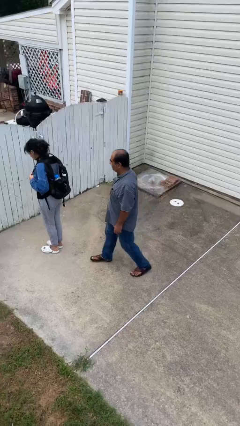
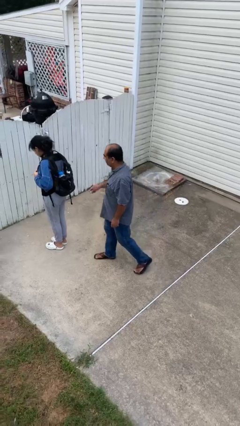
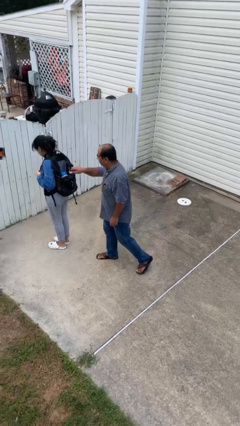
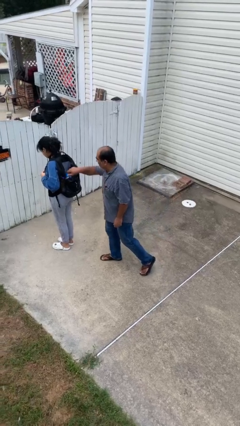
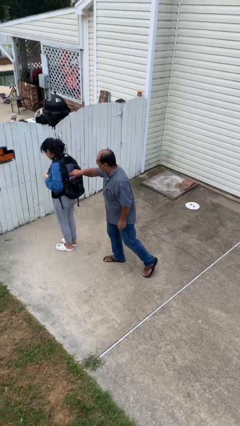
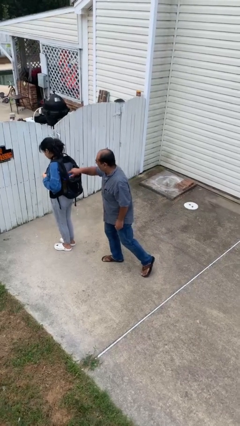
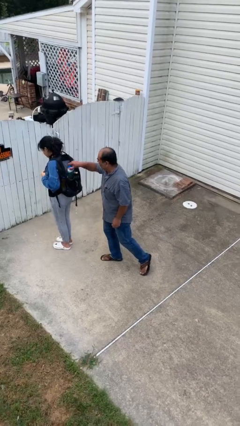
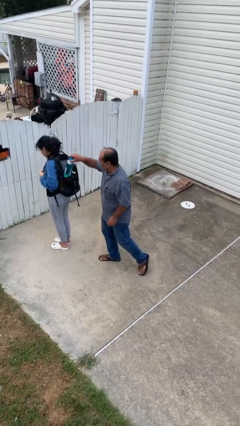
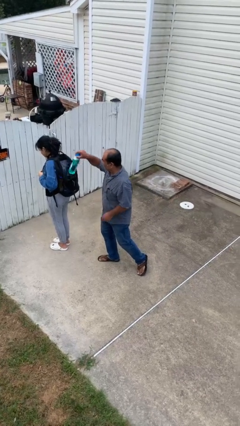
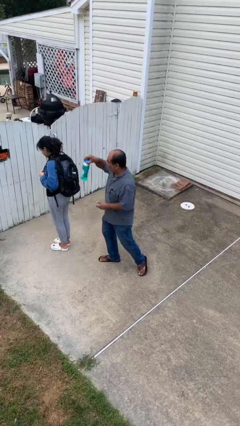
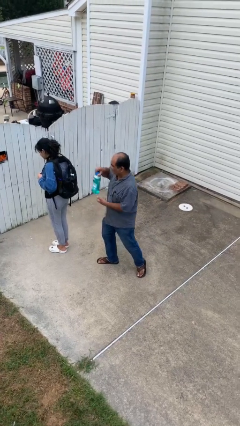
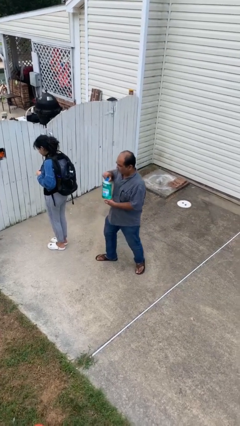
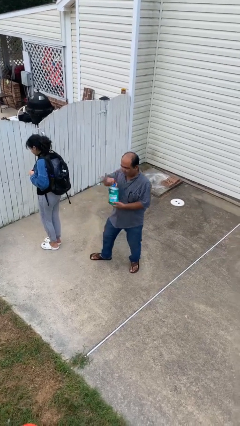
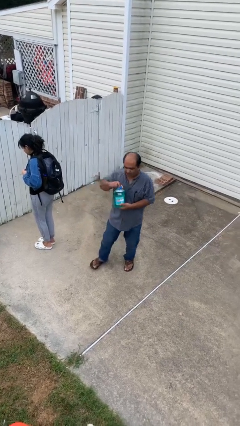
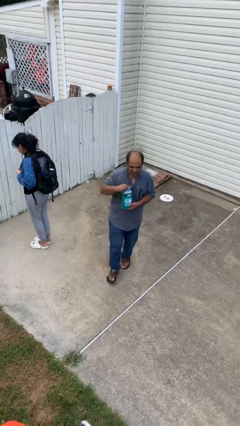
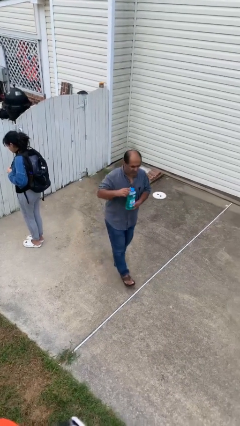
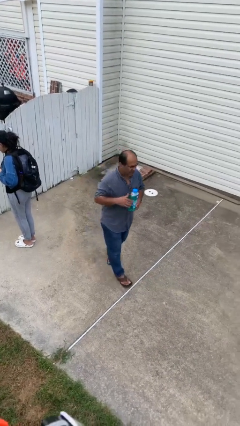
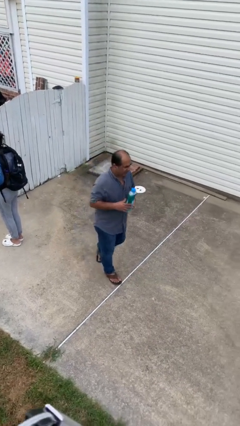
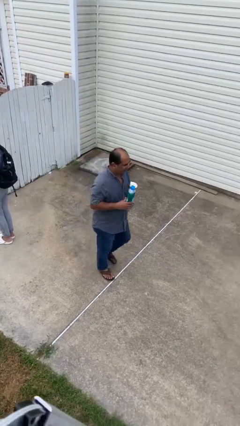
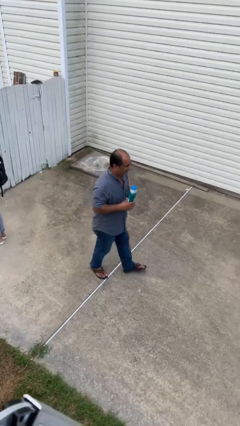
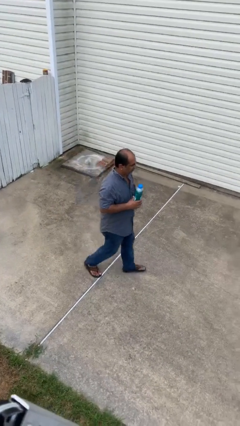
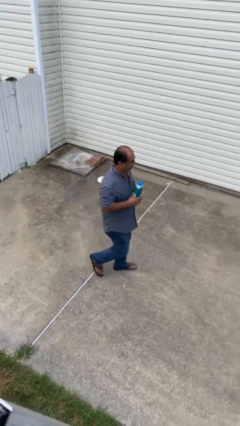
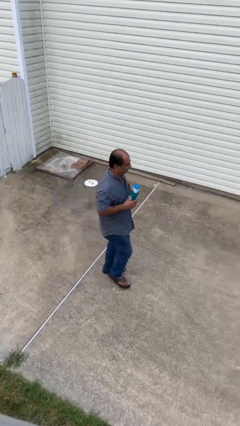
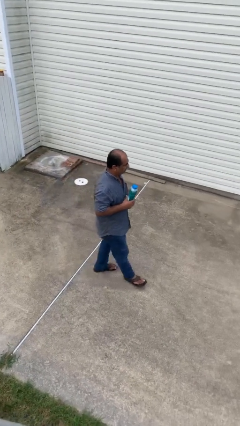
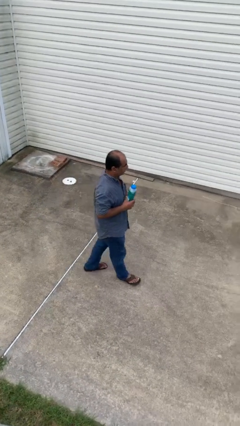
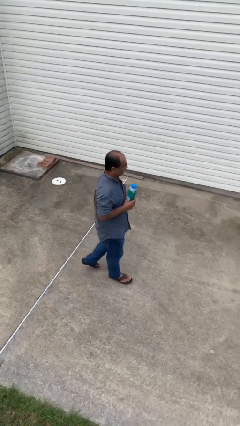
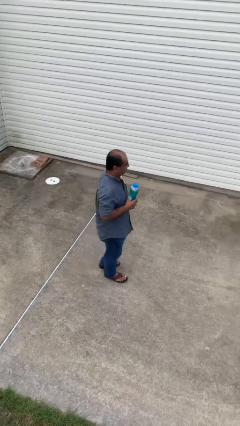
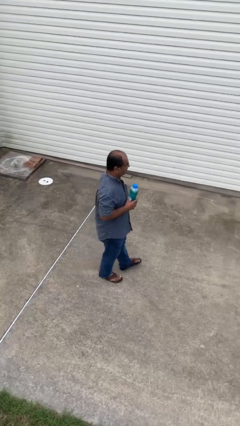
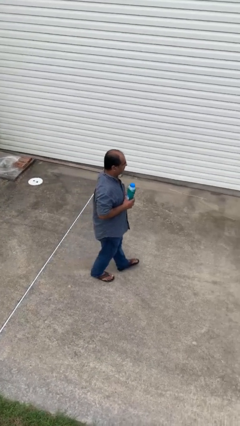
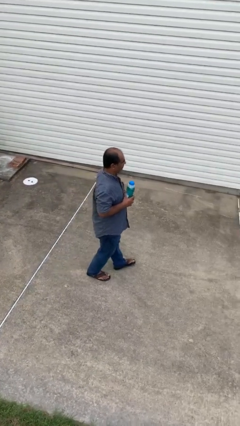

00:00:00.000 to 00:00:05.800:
person steals object from person

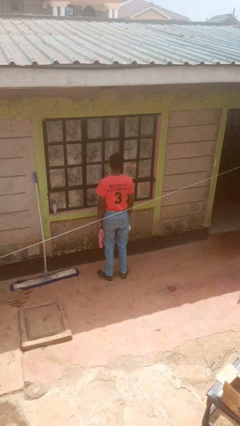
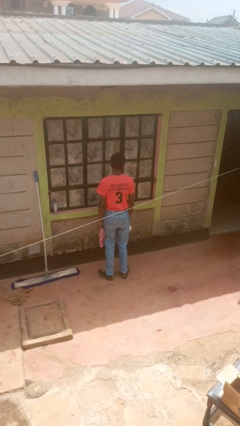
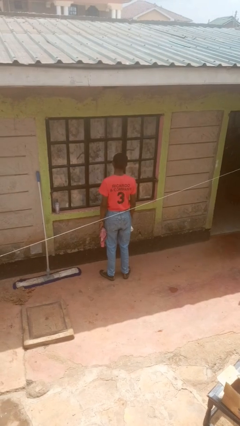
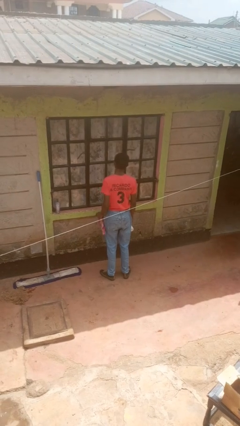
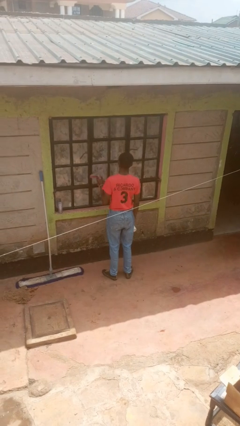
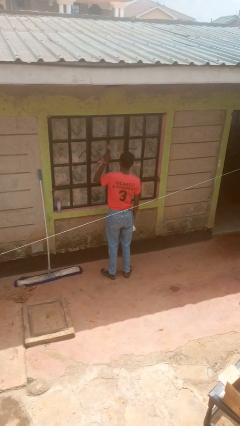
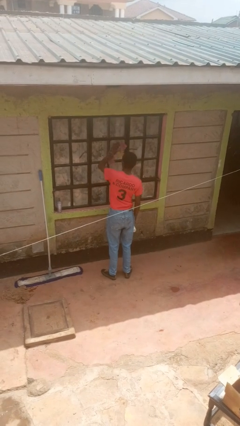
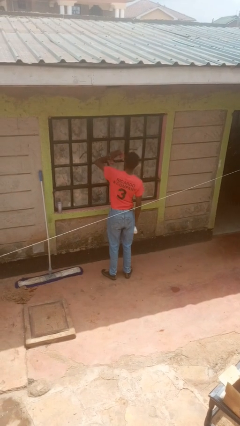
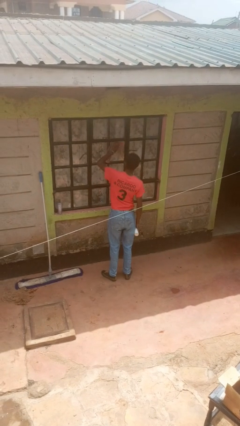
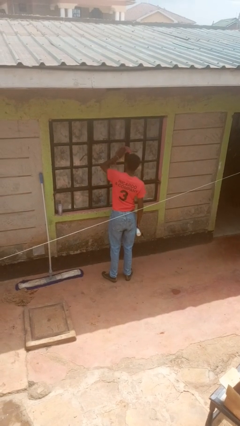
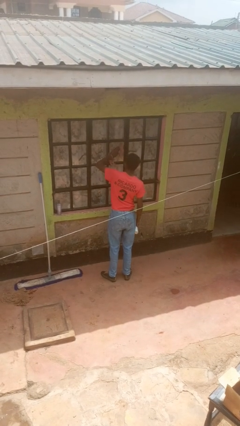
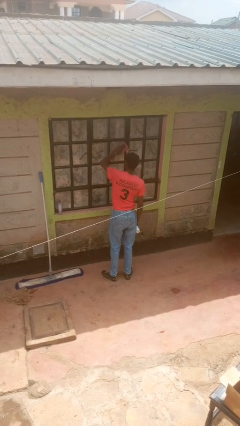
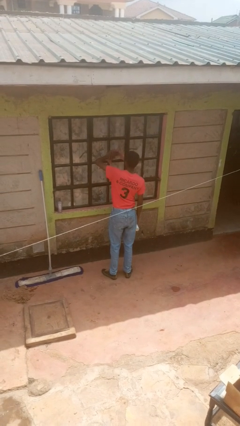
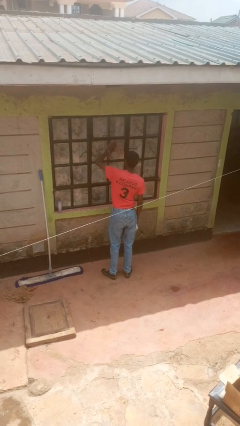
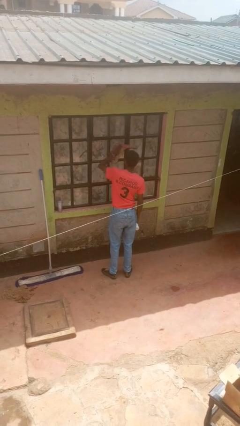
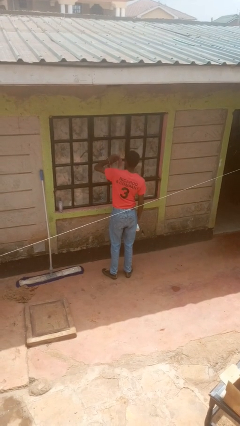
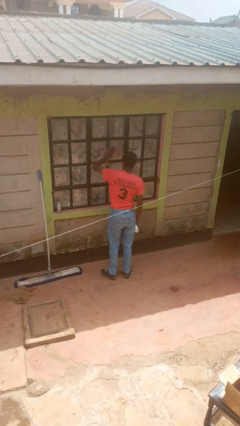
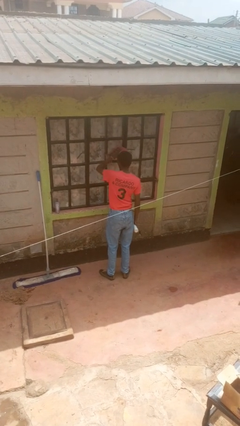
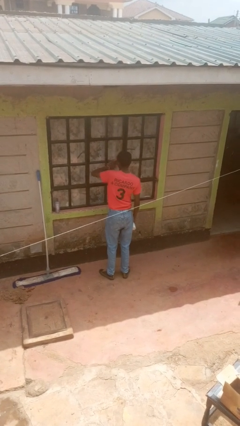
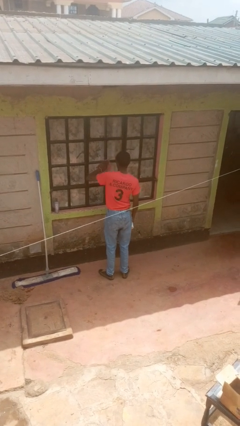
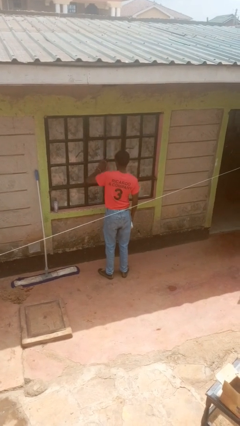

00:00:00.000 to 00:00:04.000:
person washes window

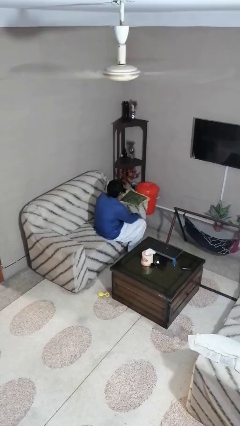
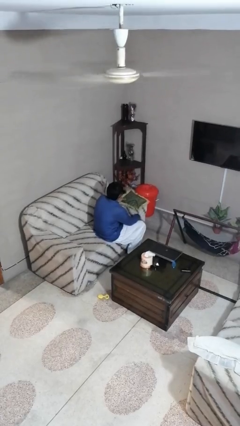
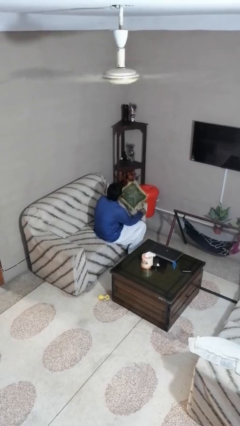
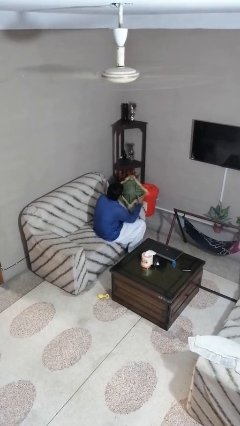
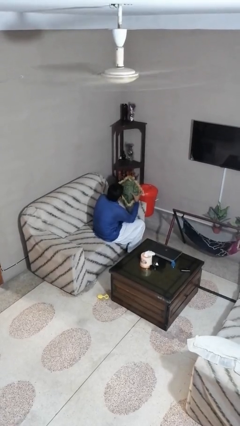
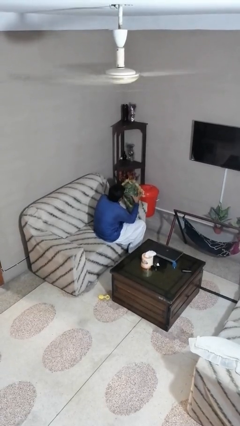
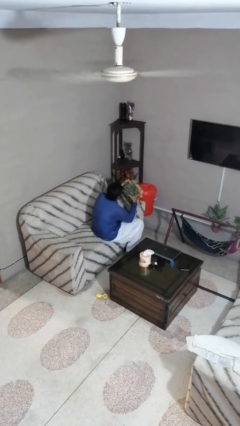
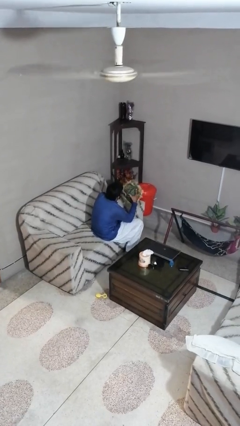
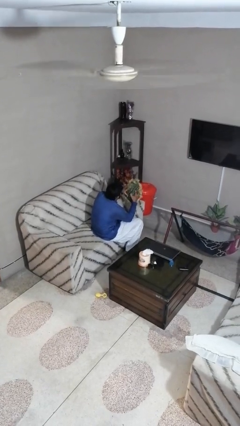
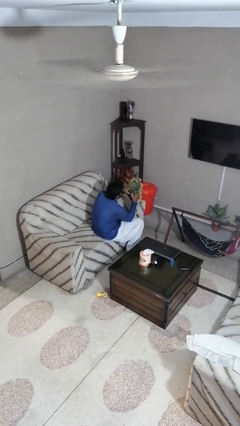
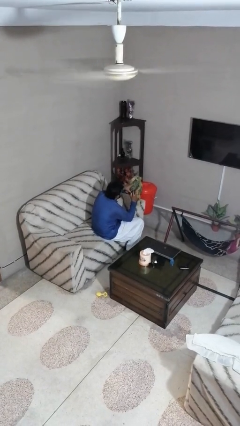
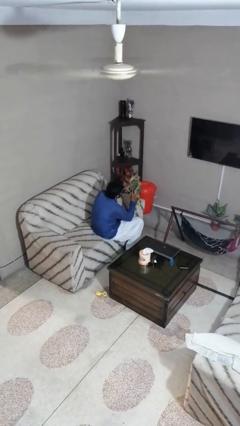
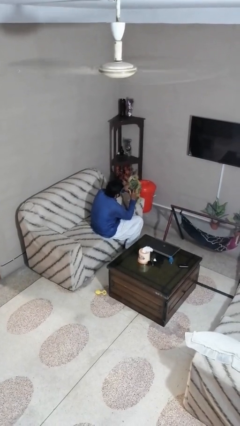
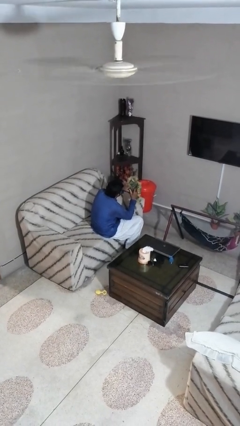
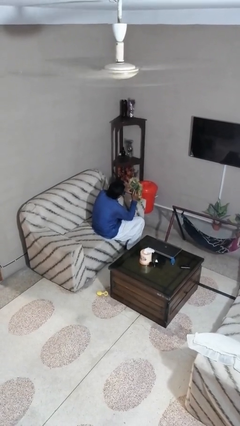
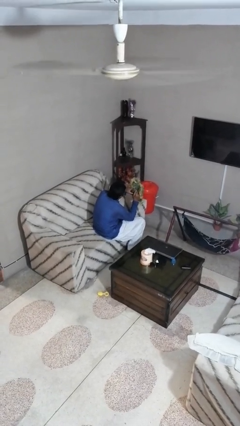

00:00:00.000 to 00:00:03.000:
person squeezes object

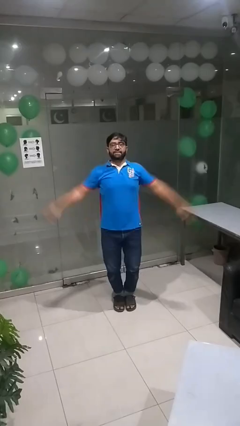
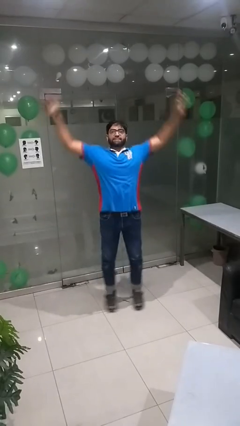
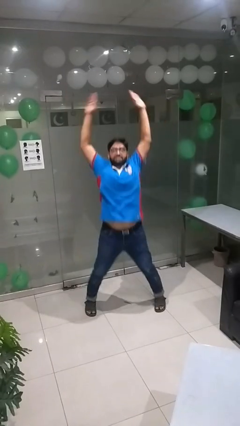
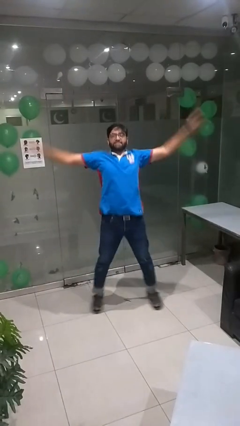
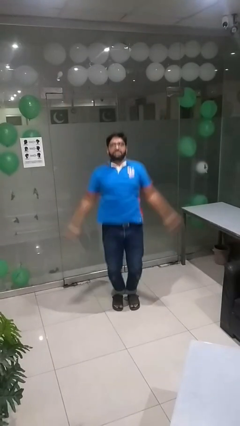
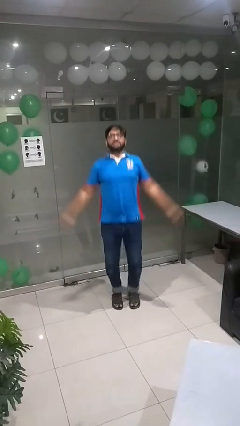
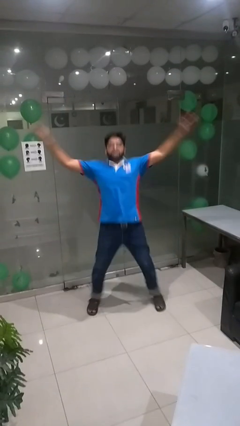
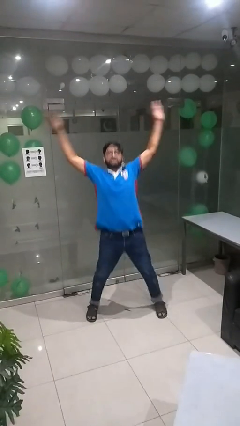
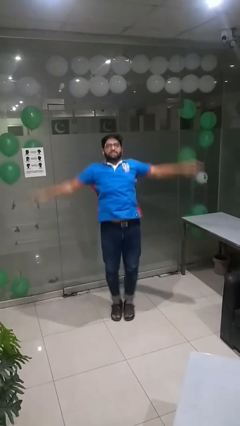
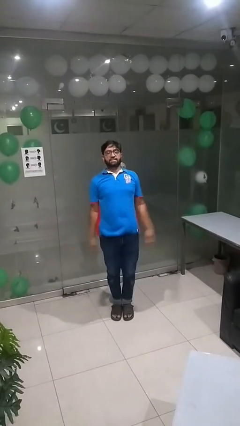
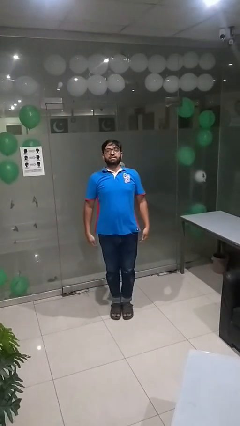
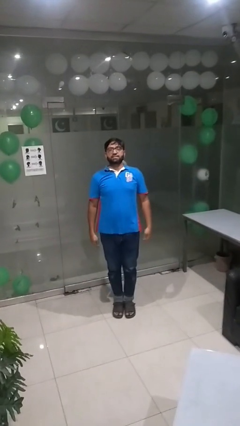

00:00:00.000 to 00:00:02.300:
person exercises with jumping jacks

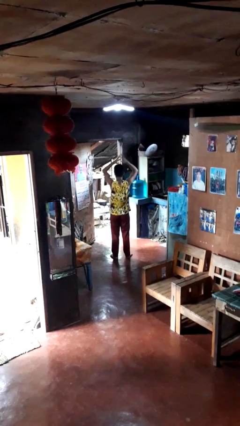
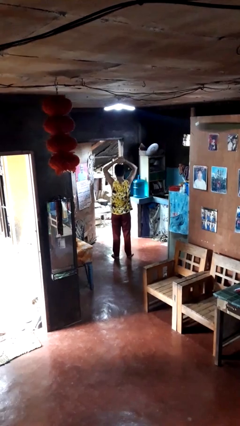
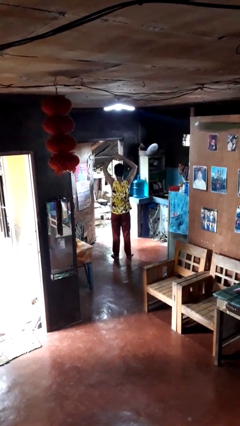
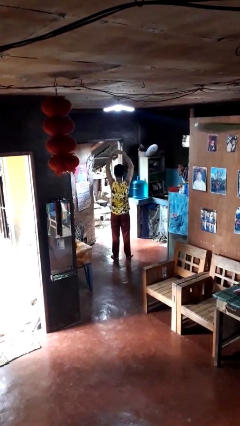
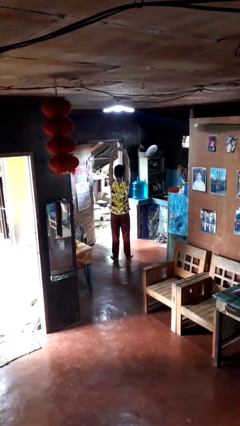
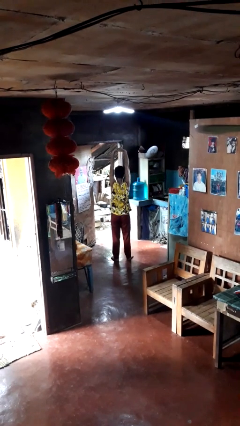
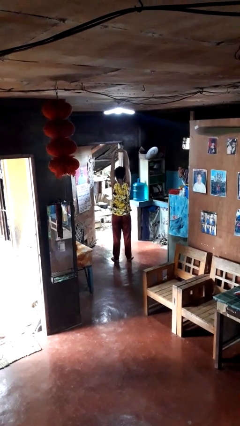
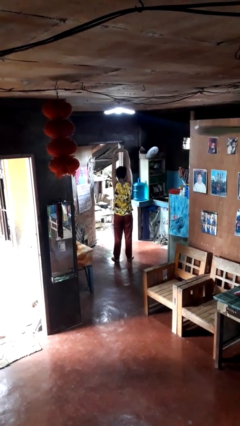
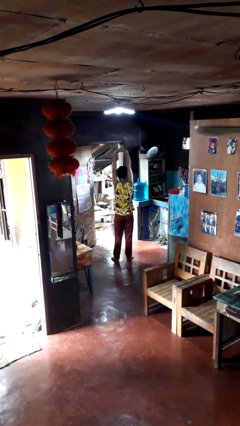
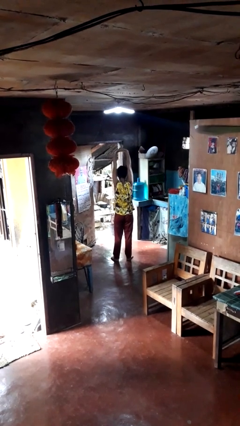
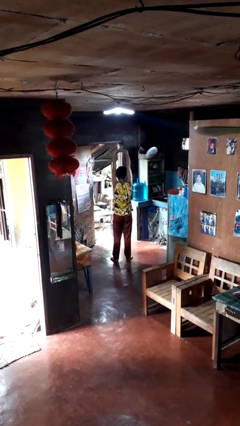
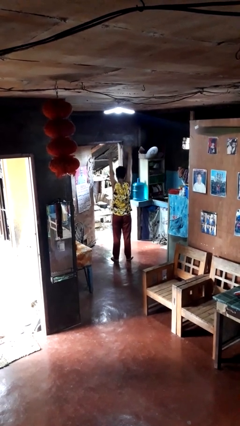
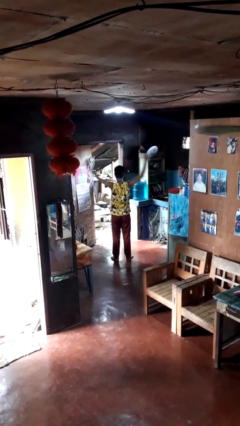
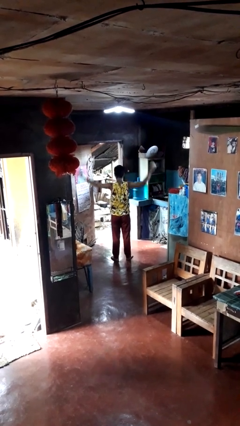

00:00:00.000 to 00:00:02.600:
person stretches arms over head

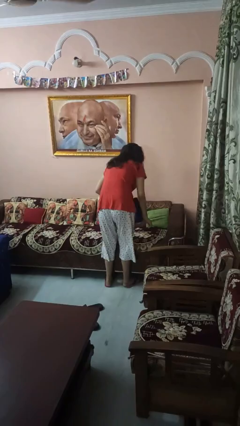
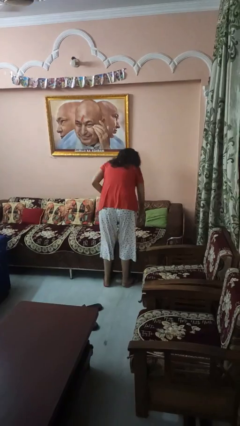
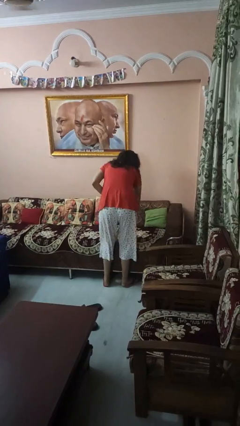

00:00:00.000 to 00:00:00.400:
person searches in couch
